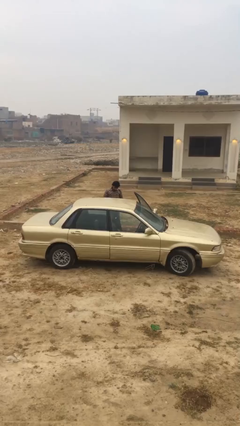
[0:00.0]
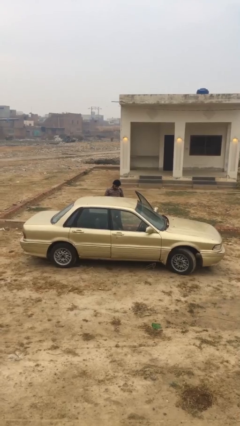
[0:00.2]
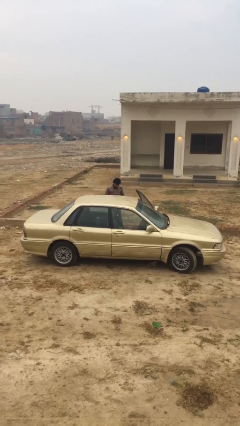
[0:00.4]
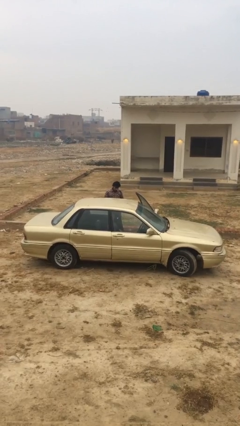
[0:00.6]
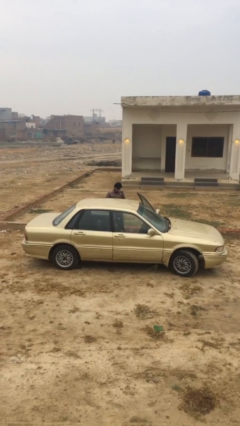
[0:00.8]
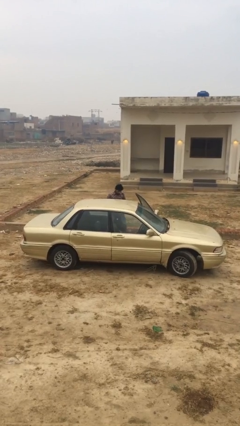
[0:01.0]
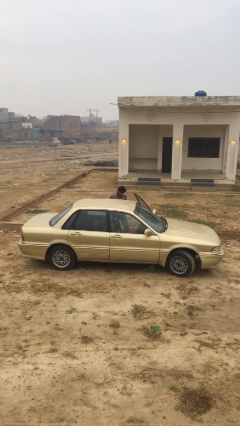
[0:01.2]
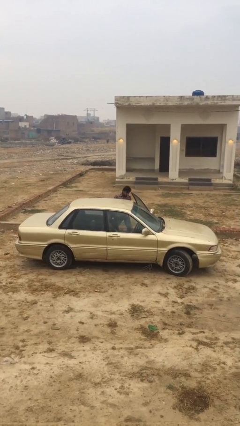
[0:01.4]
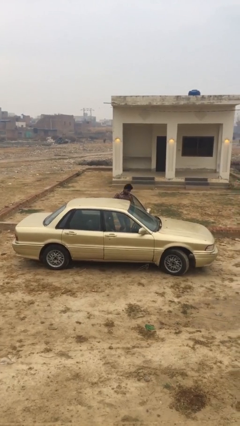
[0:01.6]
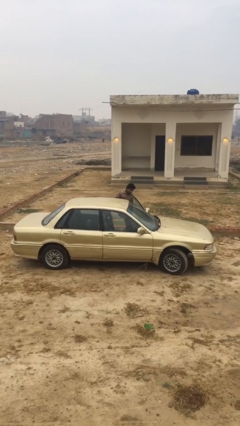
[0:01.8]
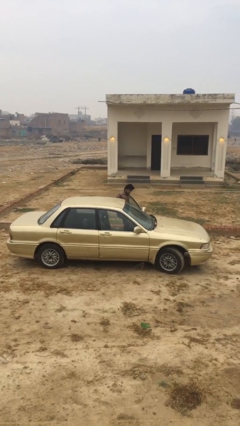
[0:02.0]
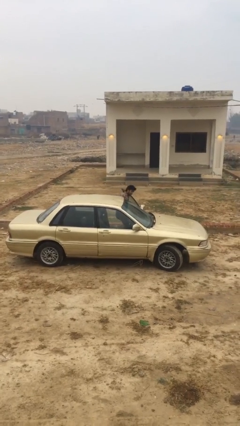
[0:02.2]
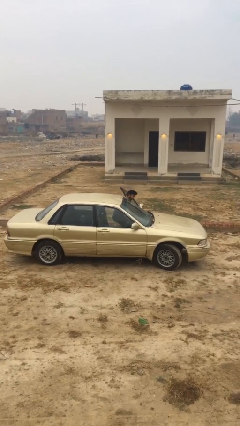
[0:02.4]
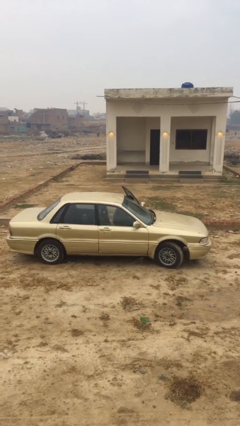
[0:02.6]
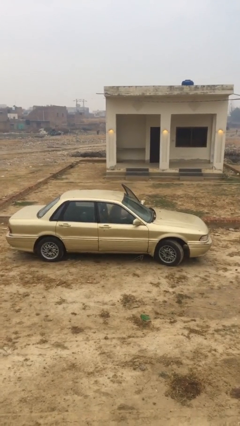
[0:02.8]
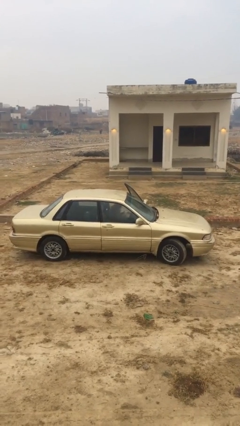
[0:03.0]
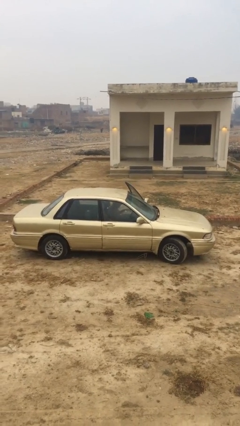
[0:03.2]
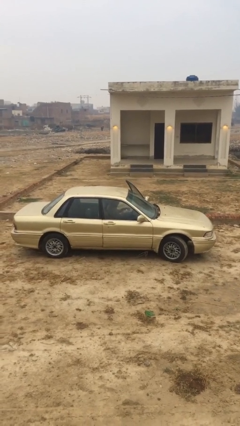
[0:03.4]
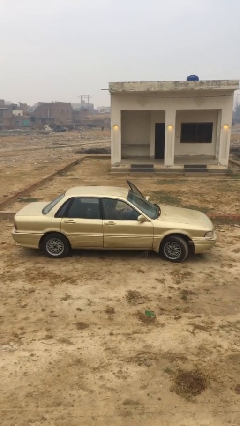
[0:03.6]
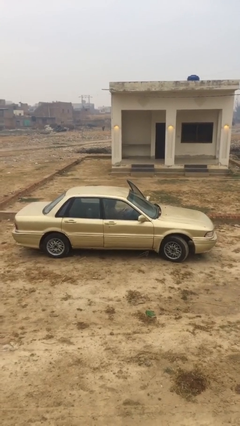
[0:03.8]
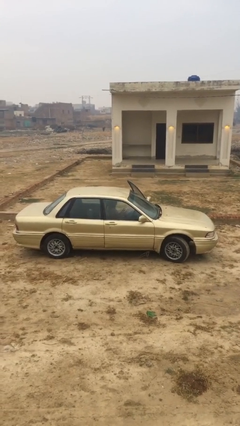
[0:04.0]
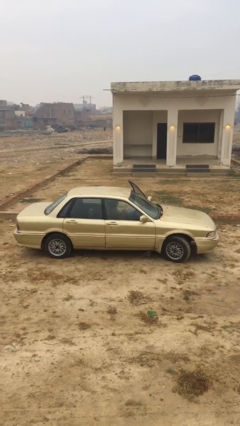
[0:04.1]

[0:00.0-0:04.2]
person enters car

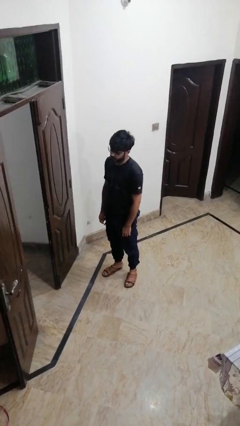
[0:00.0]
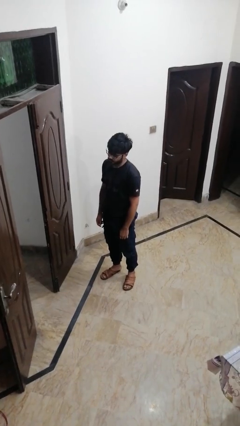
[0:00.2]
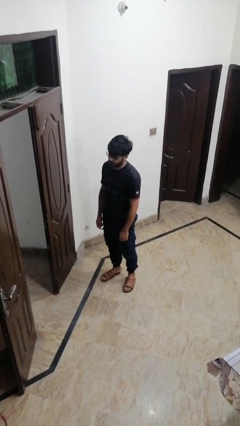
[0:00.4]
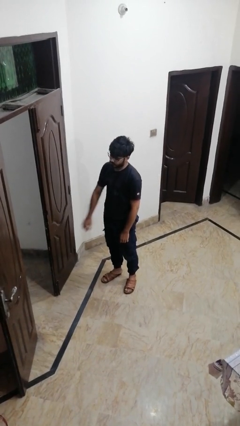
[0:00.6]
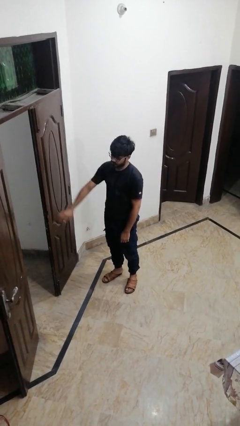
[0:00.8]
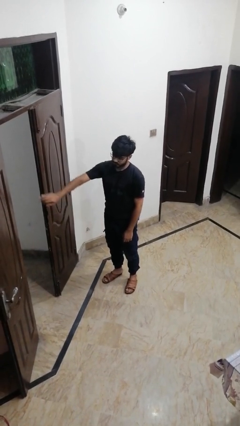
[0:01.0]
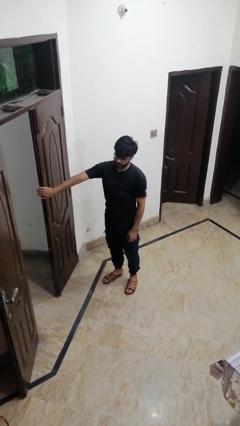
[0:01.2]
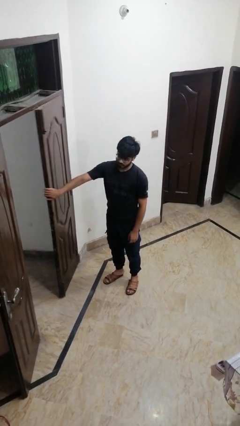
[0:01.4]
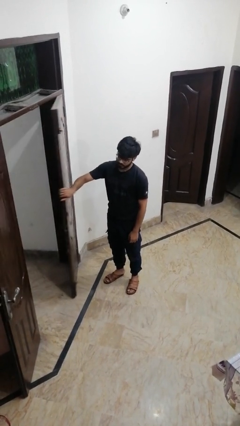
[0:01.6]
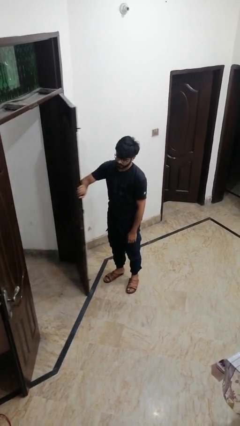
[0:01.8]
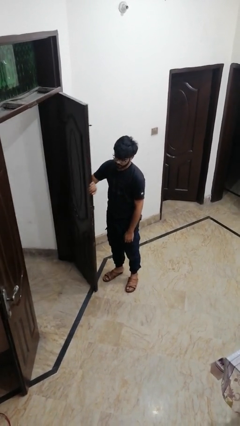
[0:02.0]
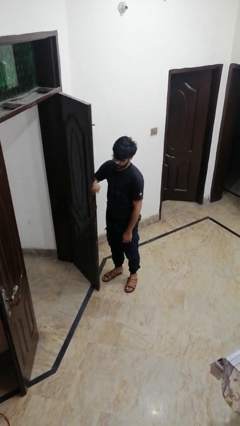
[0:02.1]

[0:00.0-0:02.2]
person opens facility door

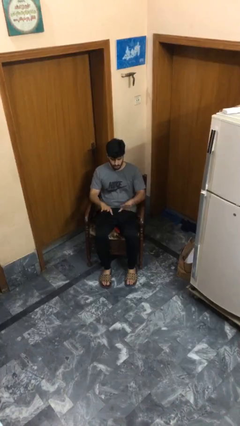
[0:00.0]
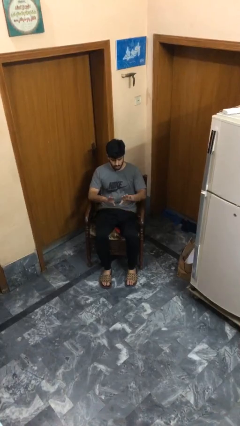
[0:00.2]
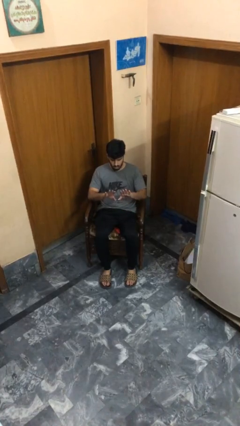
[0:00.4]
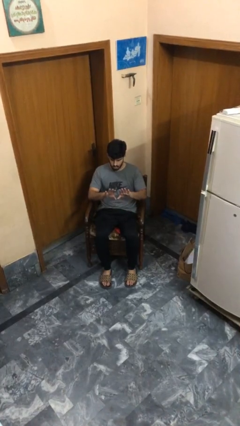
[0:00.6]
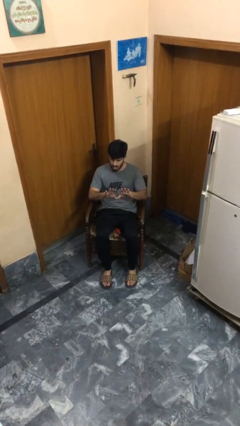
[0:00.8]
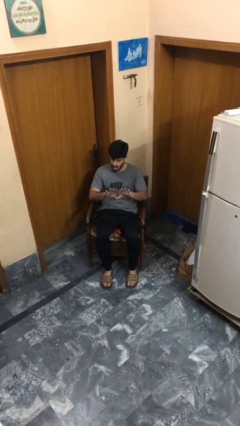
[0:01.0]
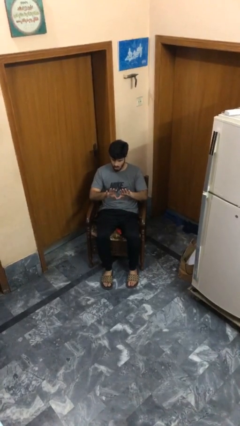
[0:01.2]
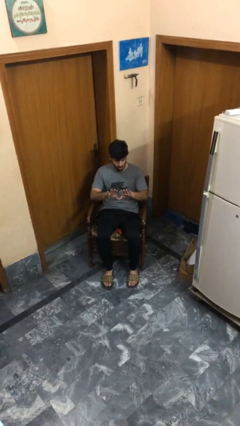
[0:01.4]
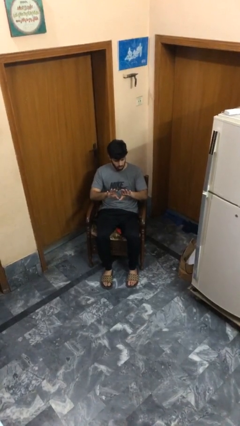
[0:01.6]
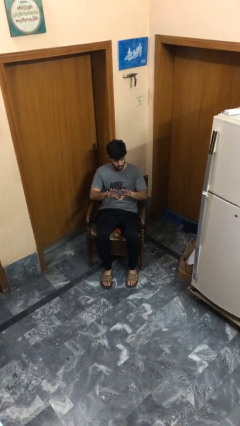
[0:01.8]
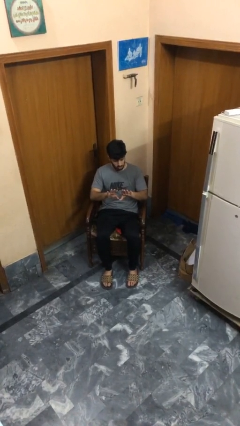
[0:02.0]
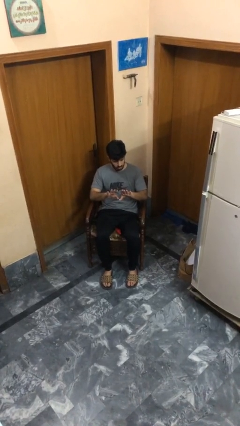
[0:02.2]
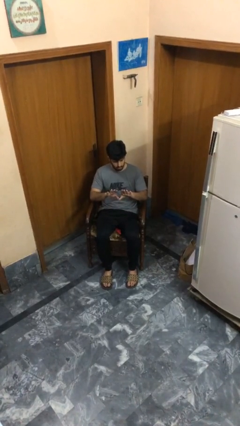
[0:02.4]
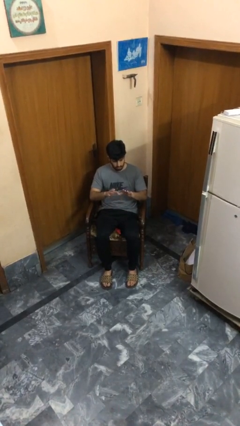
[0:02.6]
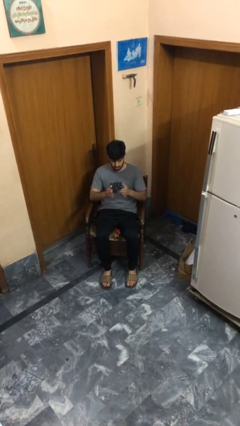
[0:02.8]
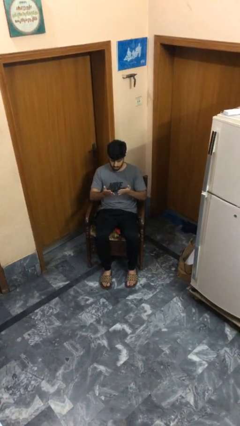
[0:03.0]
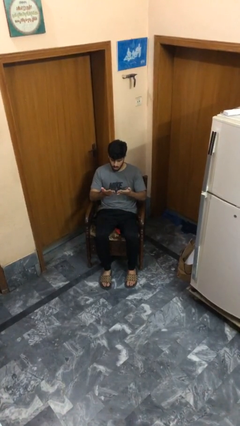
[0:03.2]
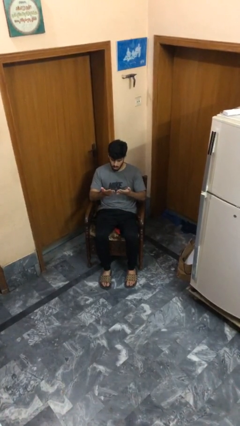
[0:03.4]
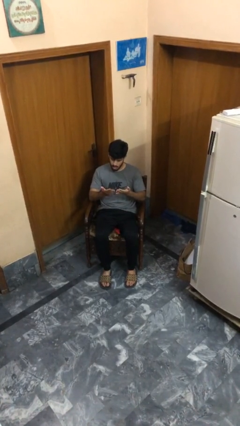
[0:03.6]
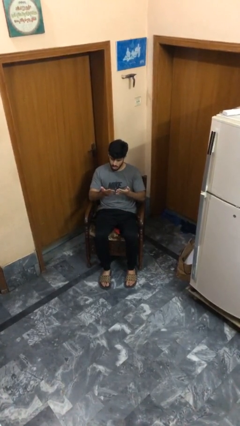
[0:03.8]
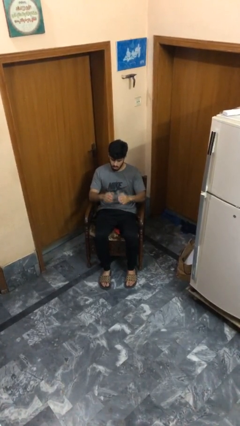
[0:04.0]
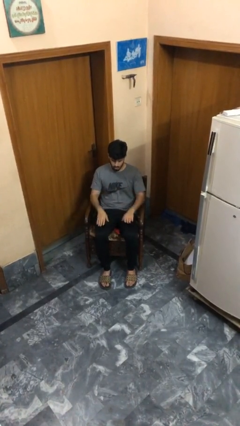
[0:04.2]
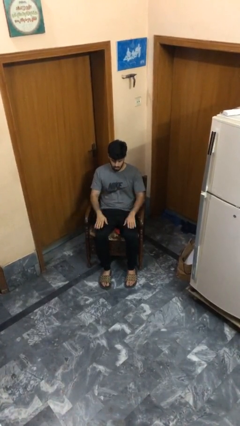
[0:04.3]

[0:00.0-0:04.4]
person looks at hands in lap

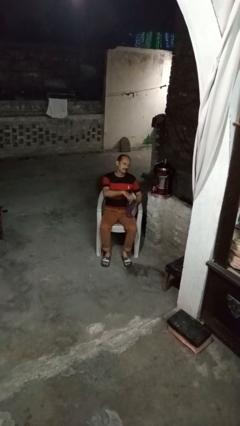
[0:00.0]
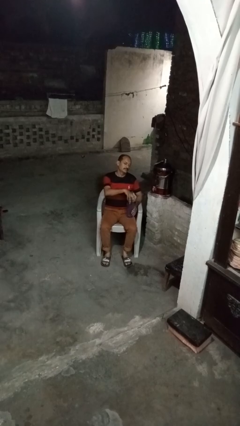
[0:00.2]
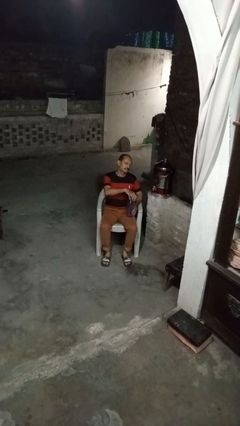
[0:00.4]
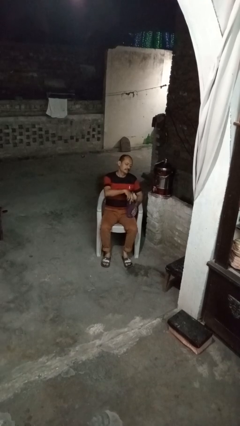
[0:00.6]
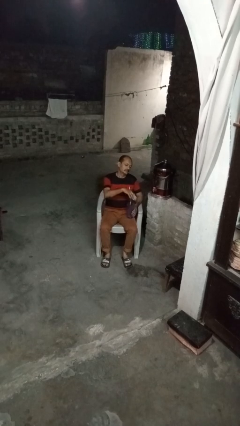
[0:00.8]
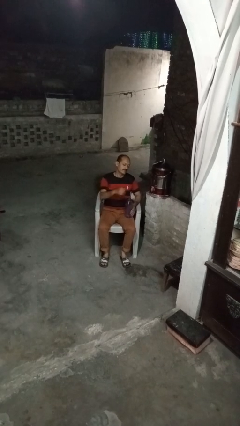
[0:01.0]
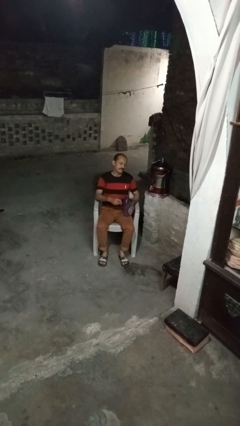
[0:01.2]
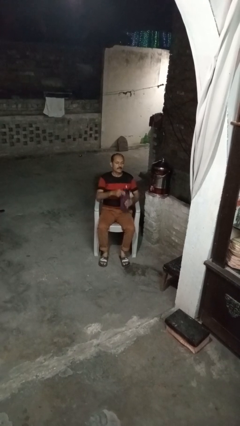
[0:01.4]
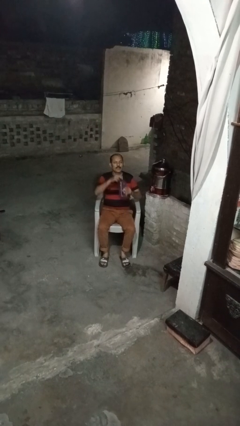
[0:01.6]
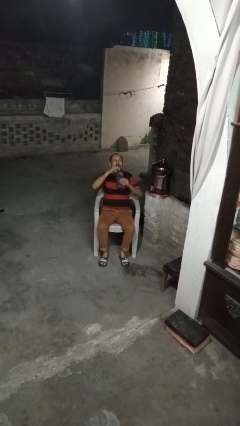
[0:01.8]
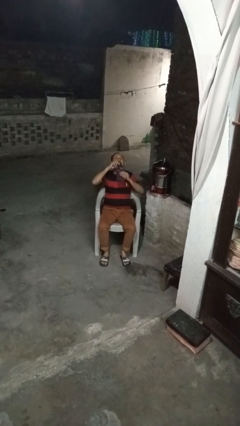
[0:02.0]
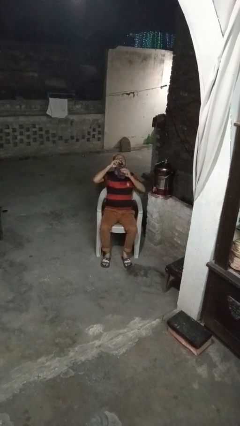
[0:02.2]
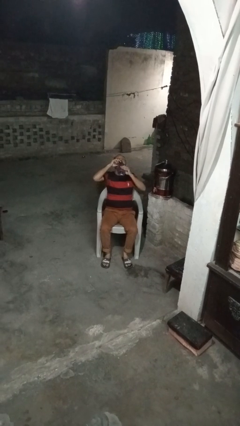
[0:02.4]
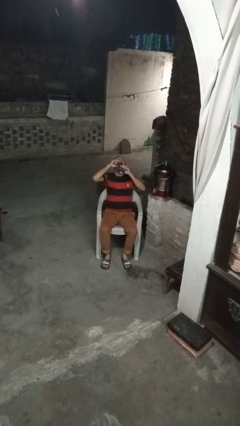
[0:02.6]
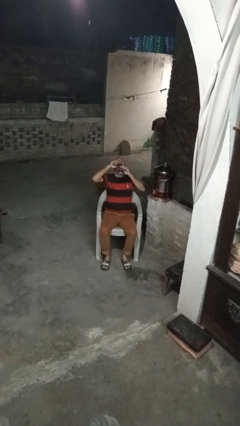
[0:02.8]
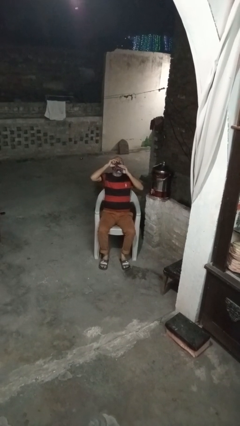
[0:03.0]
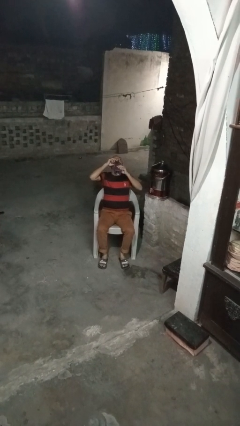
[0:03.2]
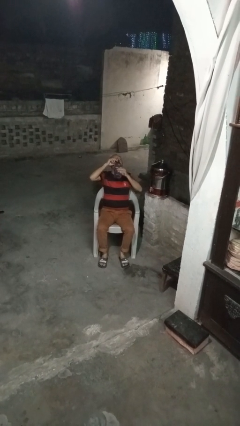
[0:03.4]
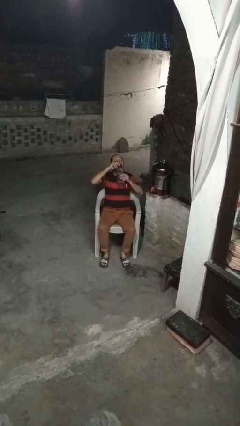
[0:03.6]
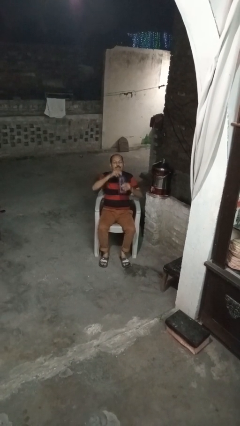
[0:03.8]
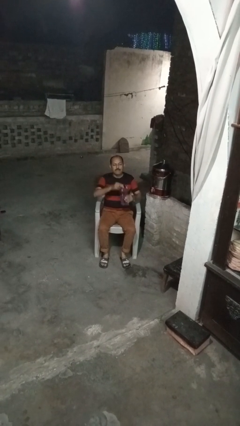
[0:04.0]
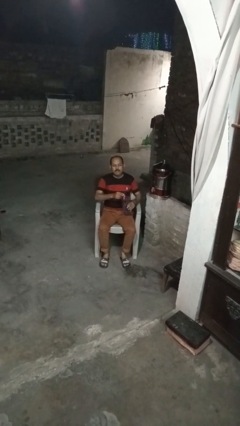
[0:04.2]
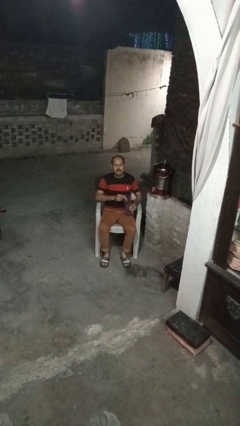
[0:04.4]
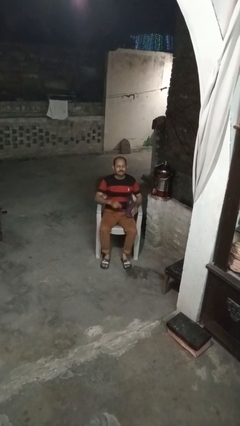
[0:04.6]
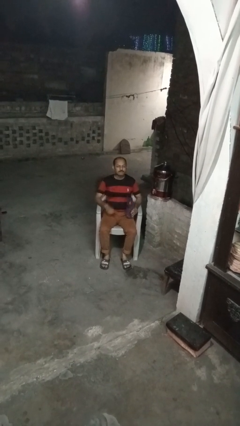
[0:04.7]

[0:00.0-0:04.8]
person drinks from bottle

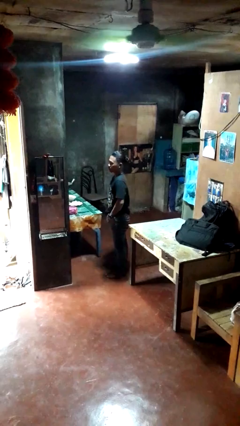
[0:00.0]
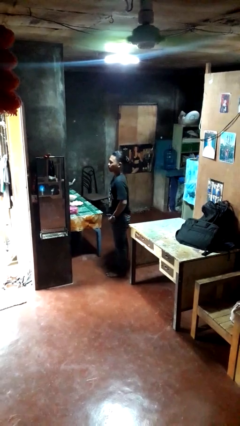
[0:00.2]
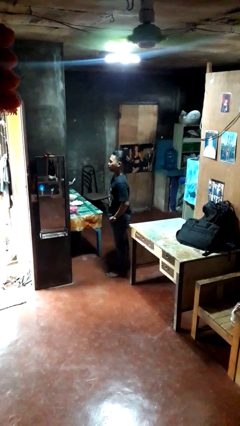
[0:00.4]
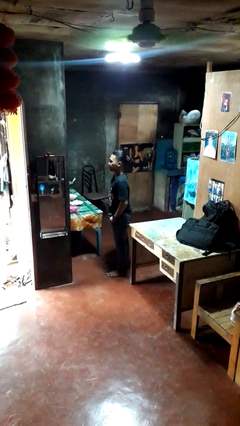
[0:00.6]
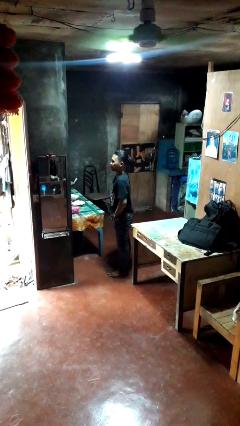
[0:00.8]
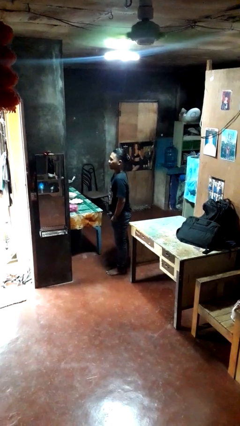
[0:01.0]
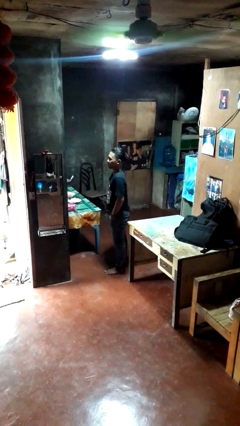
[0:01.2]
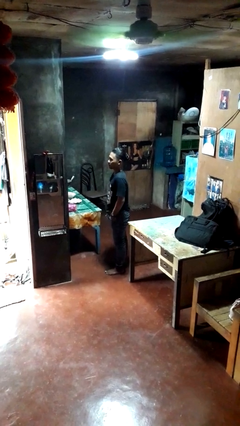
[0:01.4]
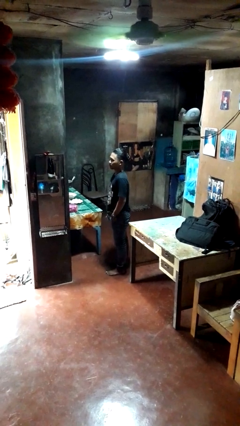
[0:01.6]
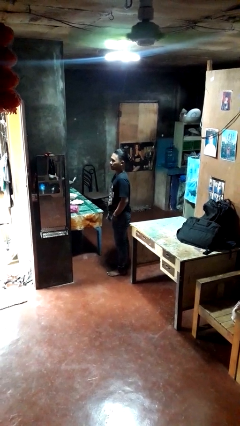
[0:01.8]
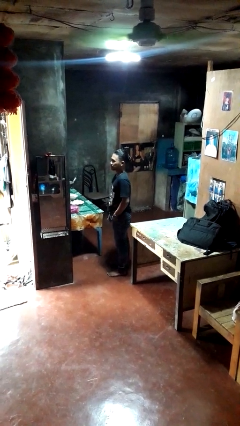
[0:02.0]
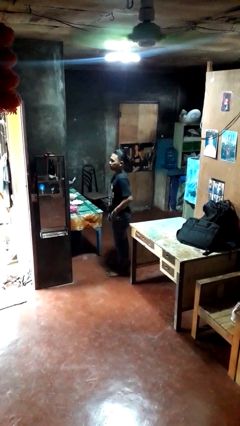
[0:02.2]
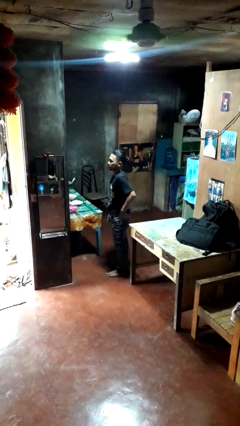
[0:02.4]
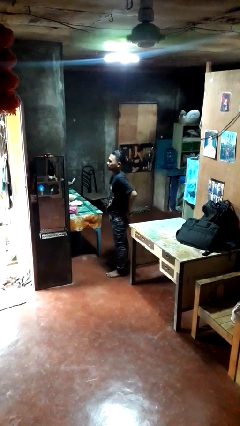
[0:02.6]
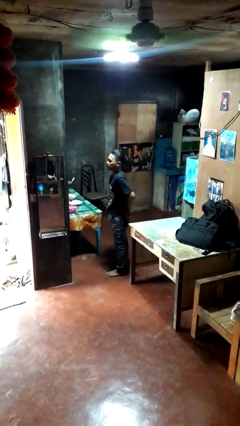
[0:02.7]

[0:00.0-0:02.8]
person puts hands in back pockets
